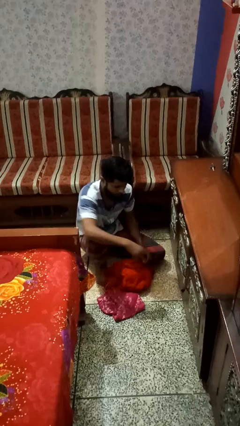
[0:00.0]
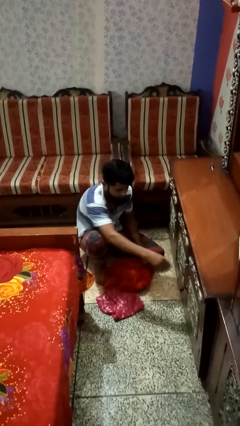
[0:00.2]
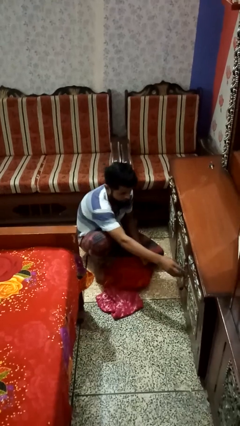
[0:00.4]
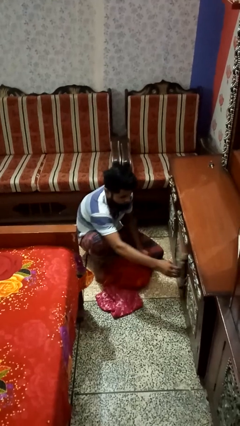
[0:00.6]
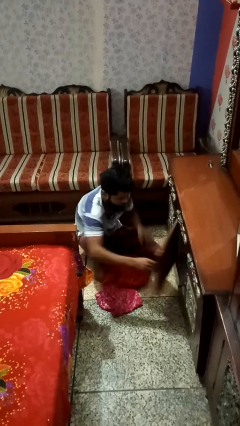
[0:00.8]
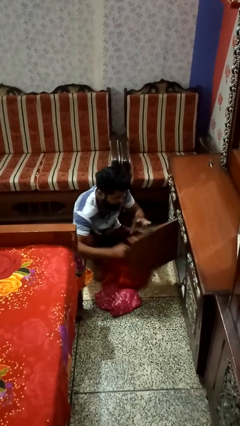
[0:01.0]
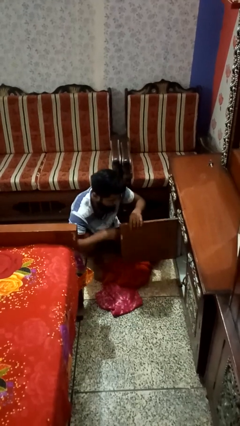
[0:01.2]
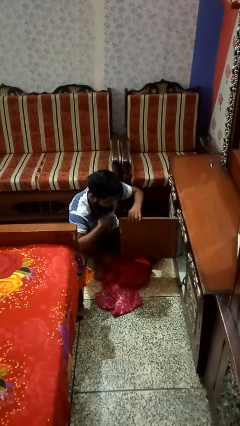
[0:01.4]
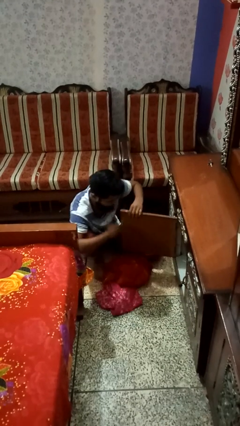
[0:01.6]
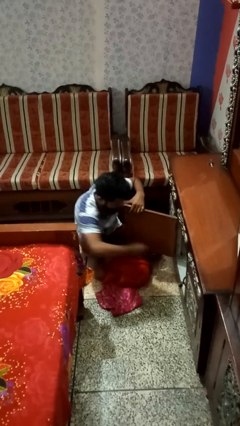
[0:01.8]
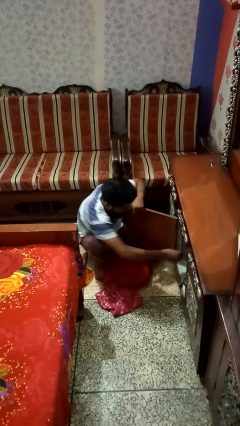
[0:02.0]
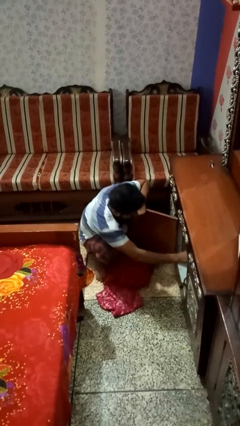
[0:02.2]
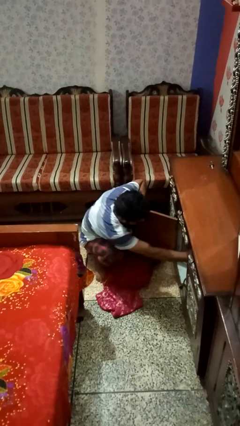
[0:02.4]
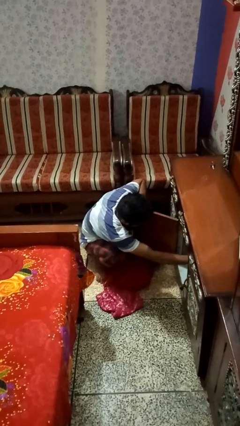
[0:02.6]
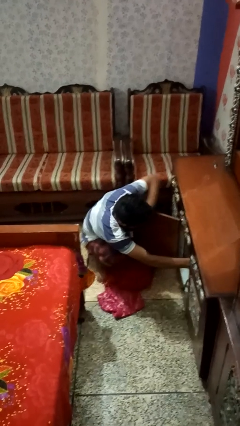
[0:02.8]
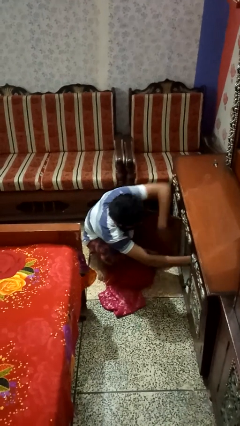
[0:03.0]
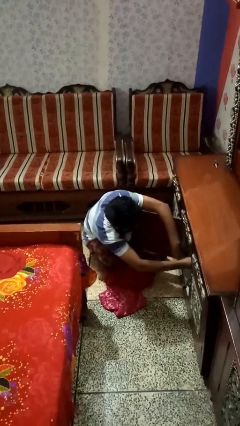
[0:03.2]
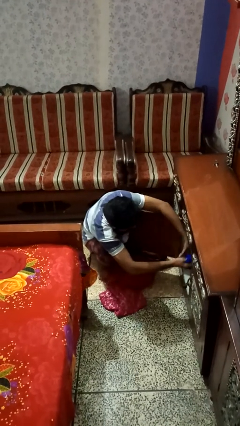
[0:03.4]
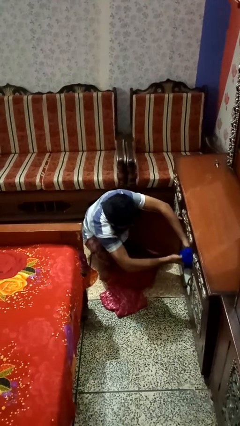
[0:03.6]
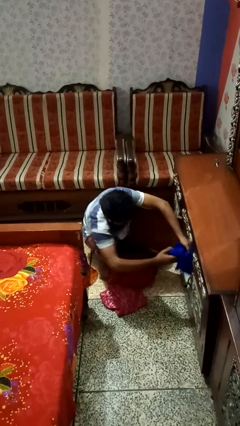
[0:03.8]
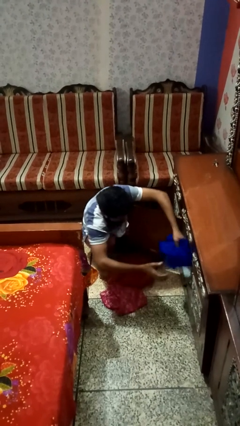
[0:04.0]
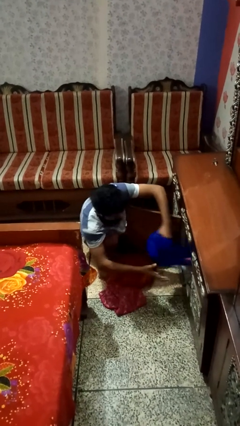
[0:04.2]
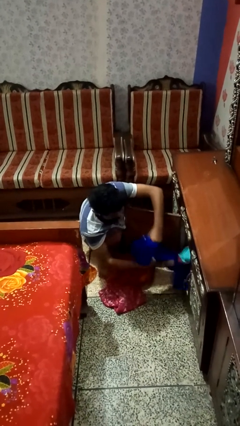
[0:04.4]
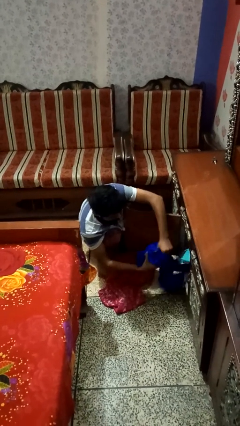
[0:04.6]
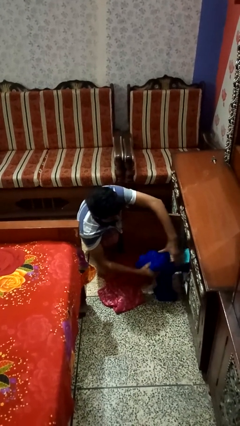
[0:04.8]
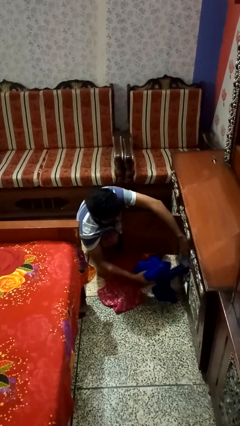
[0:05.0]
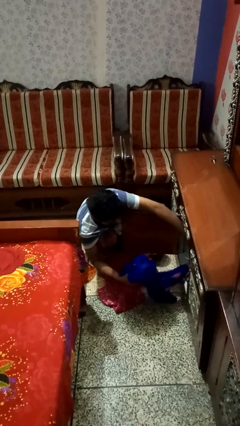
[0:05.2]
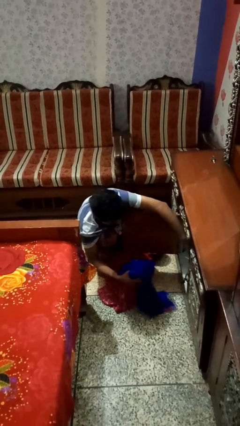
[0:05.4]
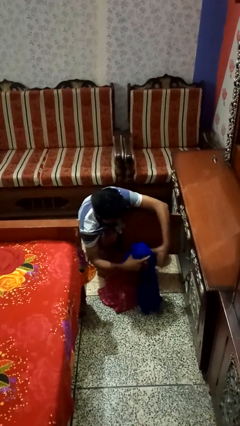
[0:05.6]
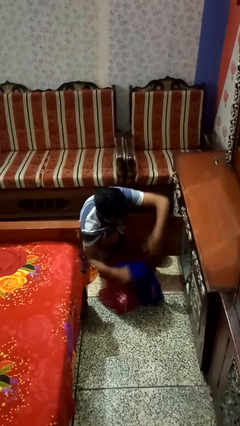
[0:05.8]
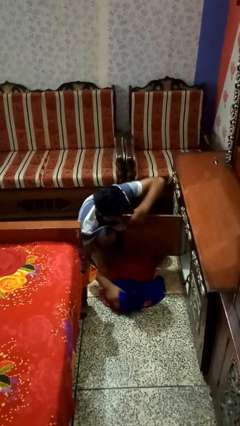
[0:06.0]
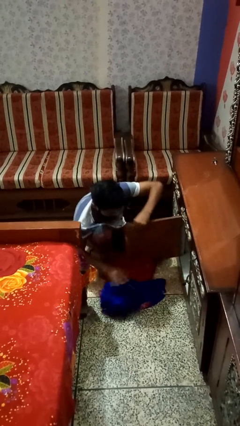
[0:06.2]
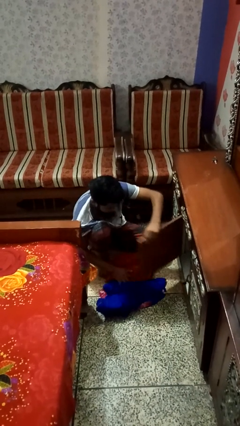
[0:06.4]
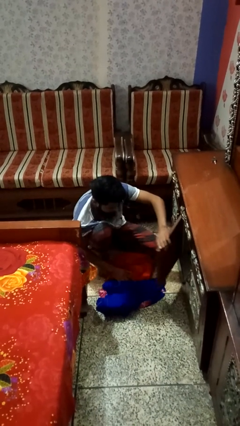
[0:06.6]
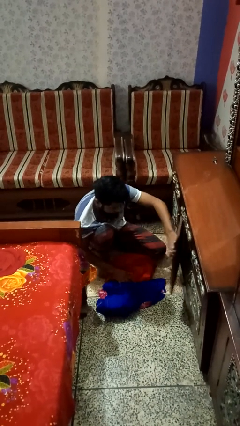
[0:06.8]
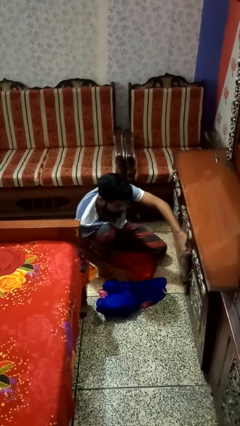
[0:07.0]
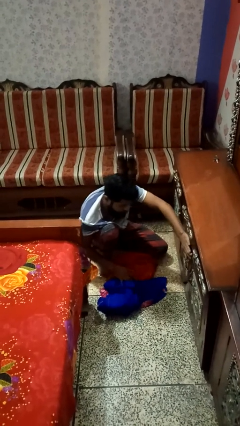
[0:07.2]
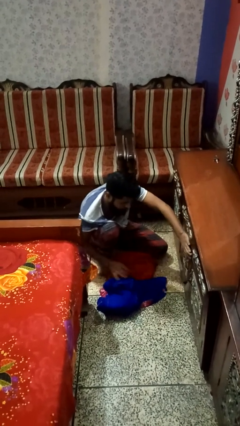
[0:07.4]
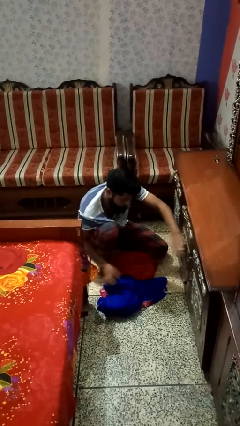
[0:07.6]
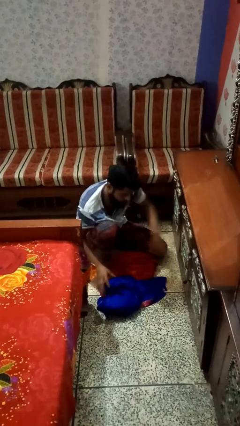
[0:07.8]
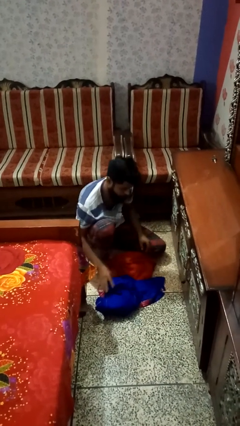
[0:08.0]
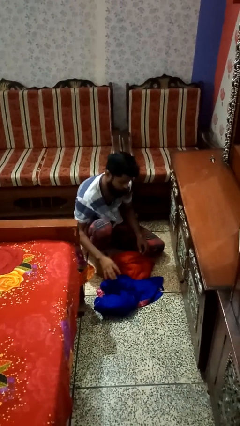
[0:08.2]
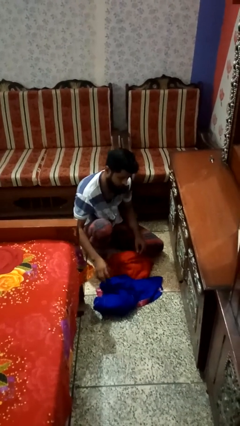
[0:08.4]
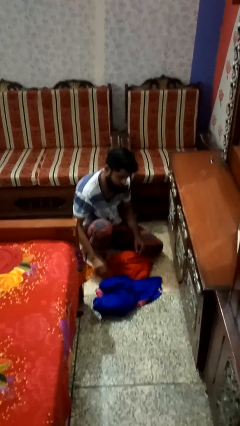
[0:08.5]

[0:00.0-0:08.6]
person takes clothes from dresser

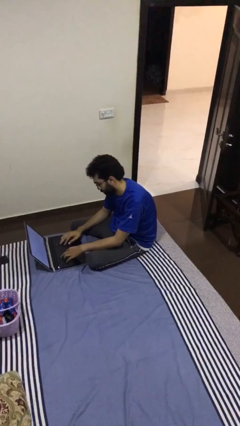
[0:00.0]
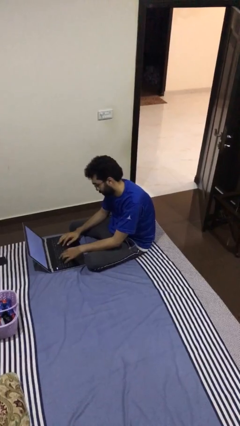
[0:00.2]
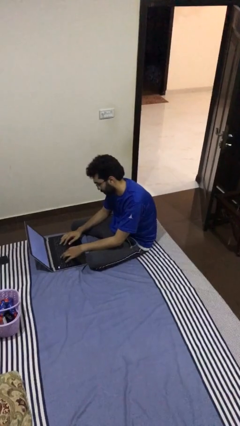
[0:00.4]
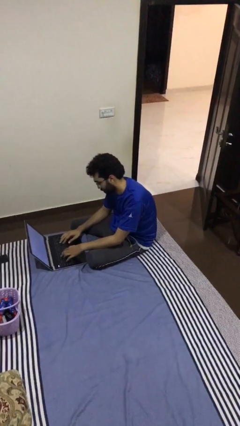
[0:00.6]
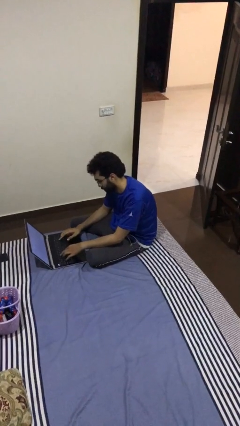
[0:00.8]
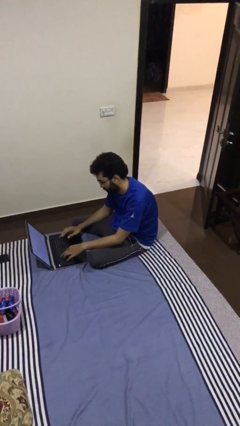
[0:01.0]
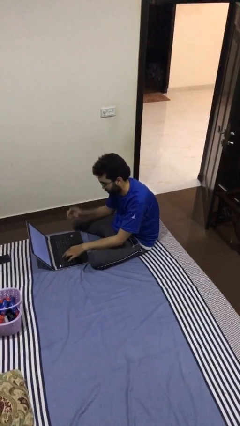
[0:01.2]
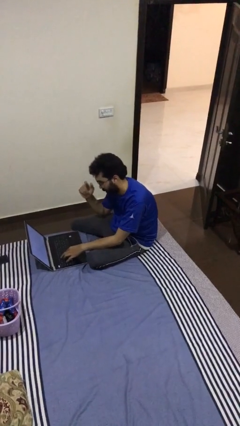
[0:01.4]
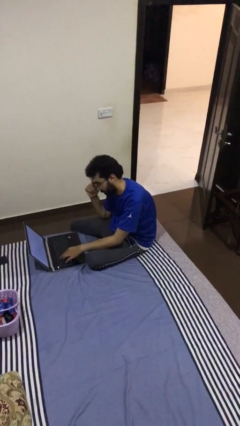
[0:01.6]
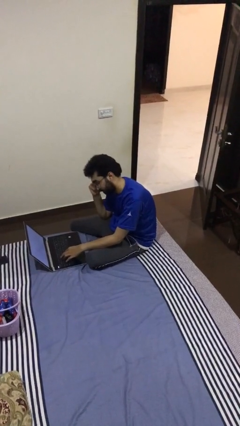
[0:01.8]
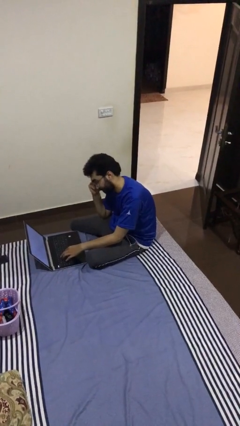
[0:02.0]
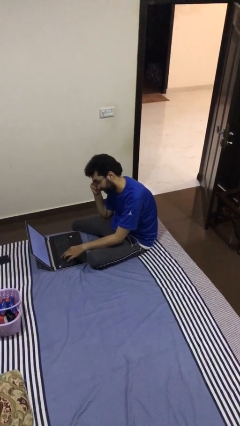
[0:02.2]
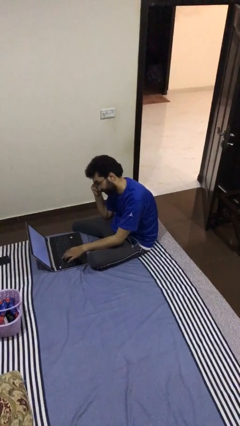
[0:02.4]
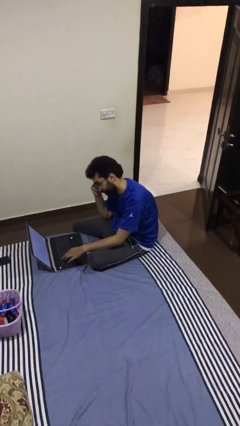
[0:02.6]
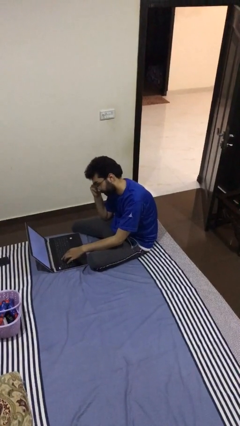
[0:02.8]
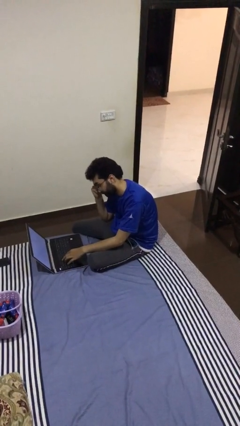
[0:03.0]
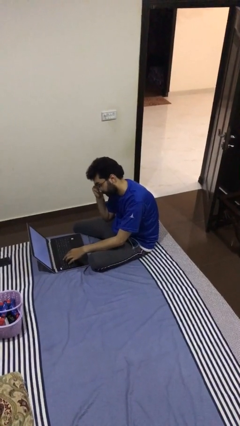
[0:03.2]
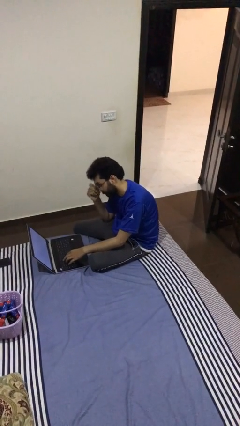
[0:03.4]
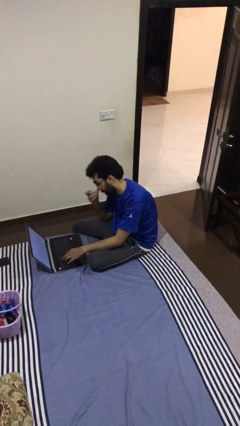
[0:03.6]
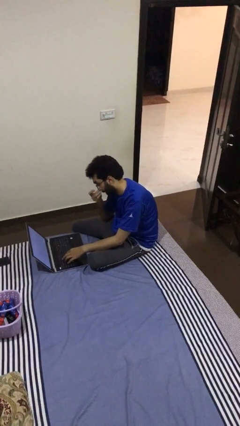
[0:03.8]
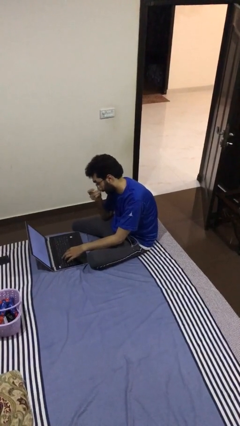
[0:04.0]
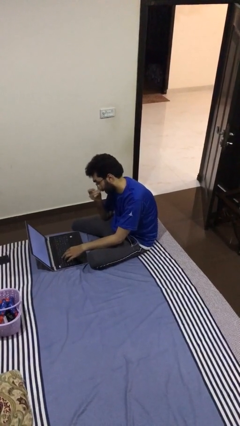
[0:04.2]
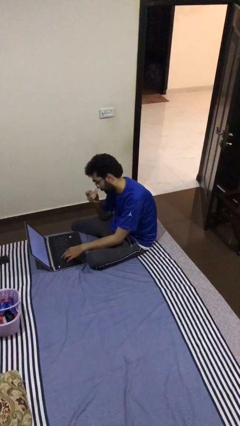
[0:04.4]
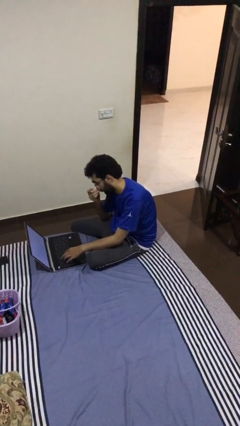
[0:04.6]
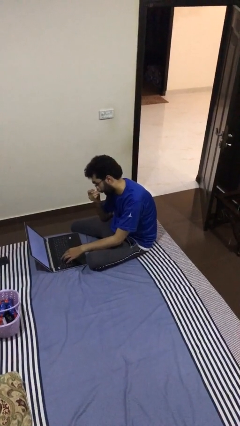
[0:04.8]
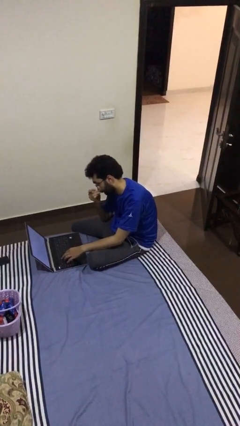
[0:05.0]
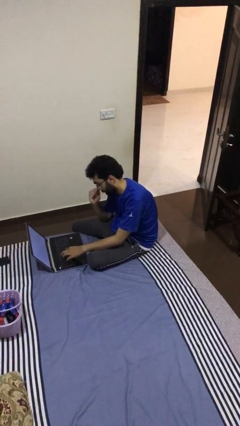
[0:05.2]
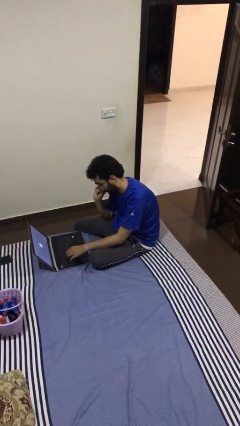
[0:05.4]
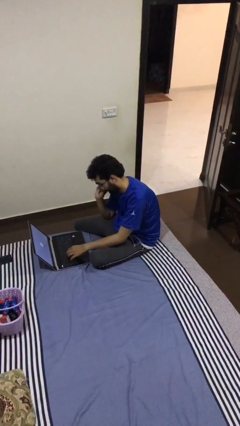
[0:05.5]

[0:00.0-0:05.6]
person interacts with laptop

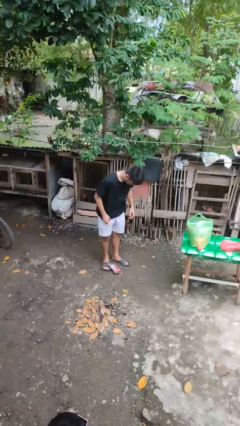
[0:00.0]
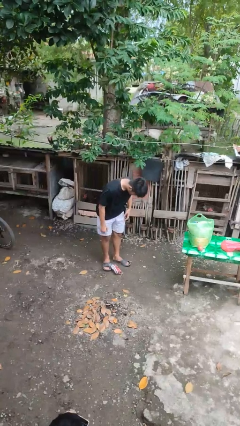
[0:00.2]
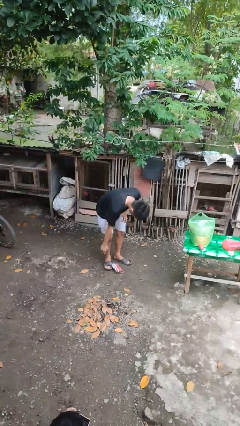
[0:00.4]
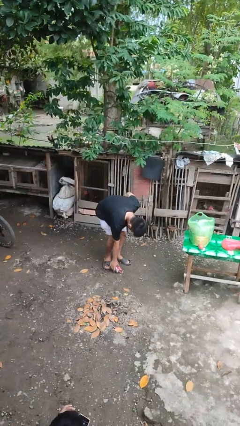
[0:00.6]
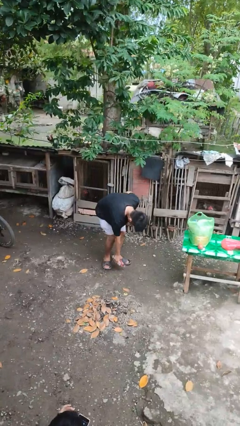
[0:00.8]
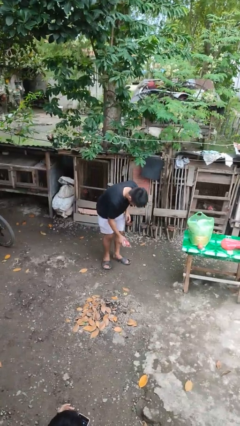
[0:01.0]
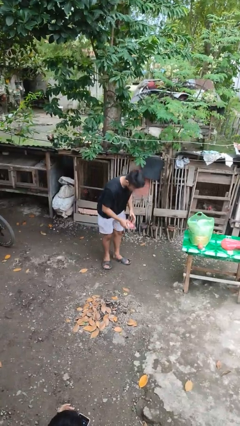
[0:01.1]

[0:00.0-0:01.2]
person picks up object from floor

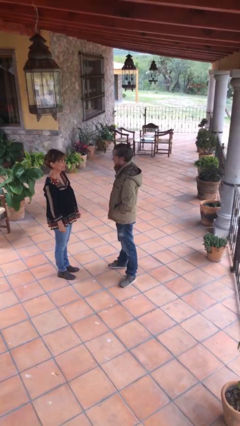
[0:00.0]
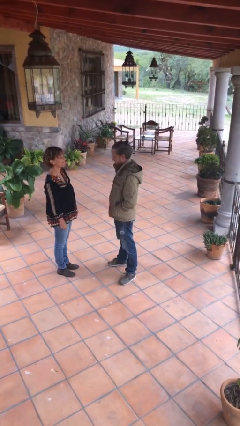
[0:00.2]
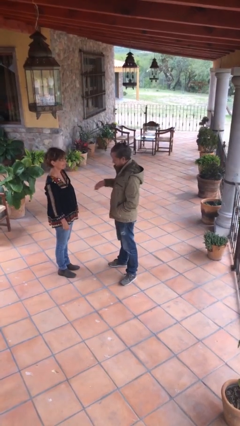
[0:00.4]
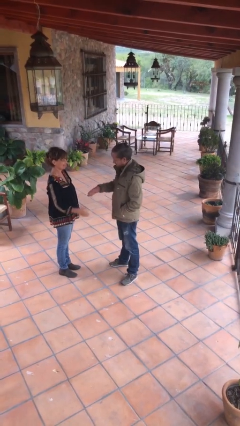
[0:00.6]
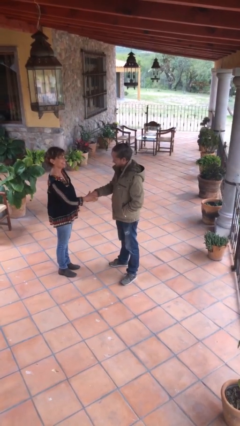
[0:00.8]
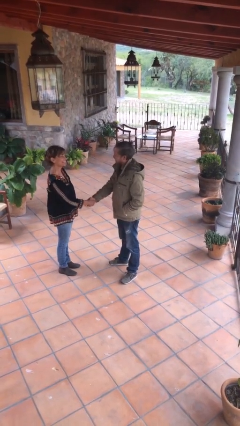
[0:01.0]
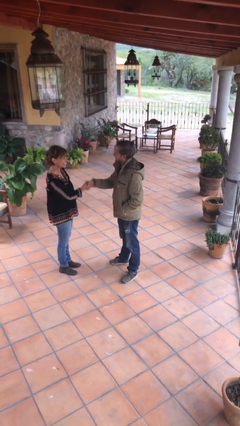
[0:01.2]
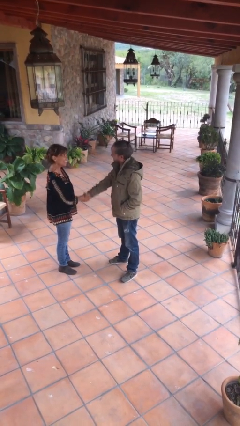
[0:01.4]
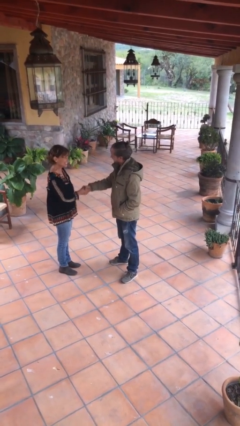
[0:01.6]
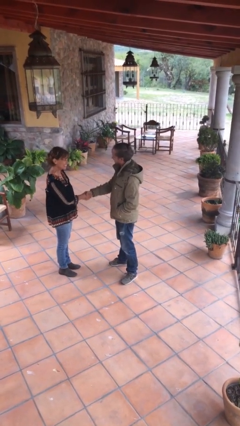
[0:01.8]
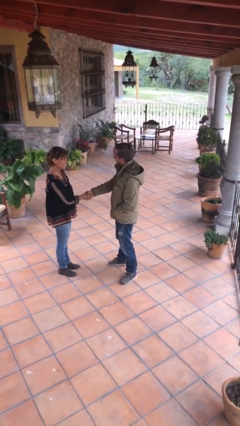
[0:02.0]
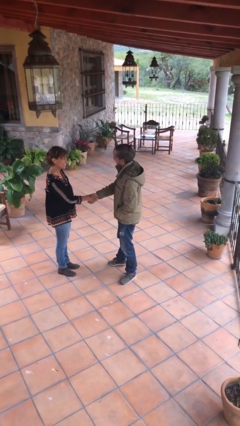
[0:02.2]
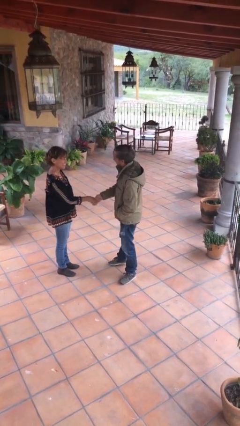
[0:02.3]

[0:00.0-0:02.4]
person shakes hand
